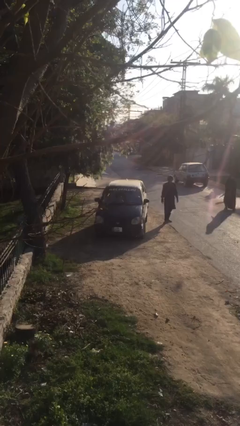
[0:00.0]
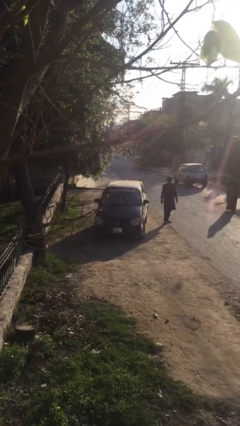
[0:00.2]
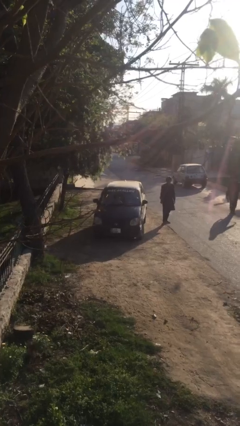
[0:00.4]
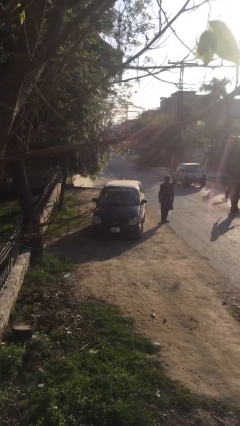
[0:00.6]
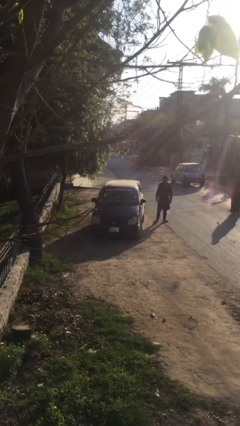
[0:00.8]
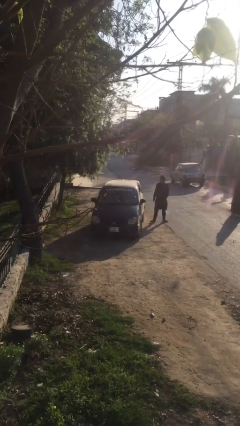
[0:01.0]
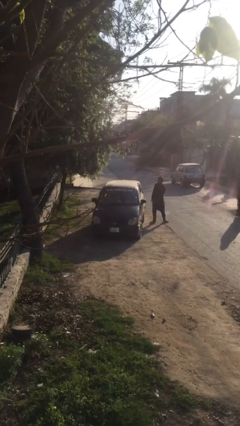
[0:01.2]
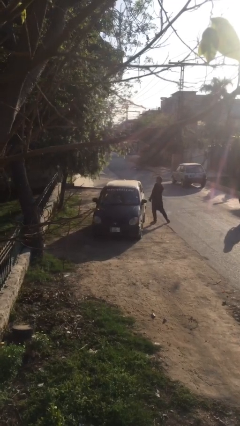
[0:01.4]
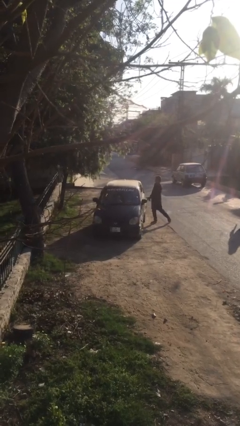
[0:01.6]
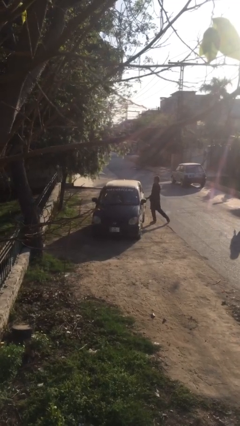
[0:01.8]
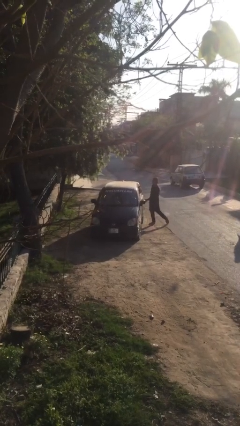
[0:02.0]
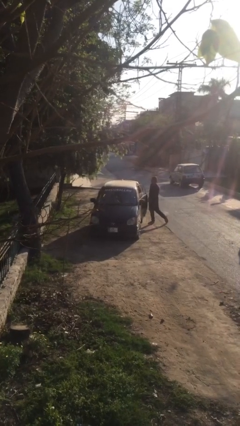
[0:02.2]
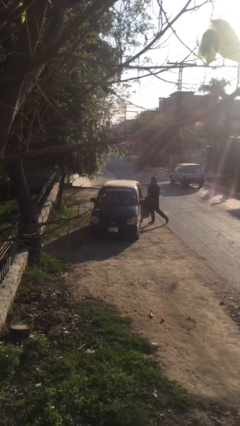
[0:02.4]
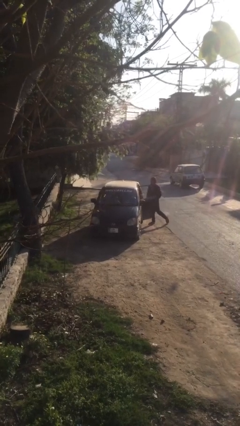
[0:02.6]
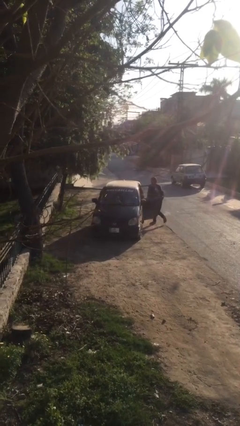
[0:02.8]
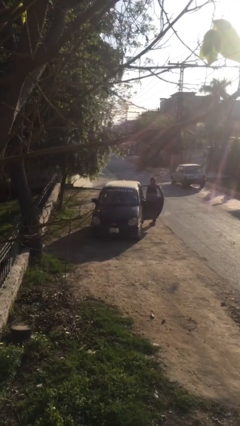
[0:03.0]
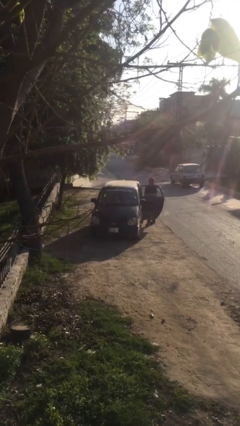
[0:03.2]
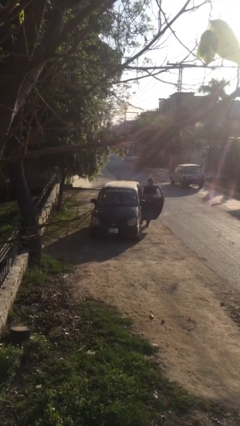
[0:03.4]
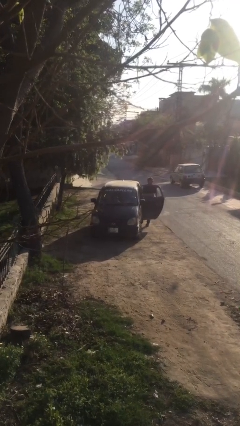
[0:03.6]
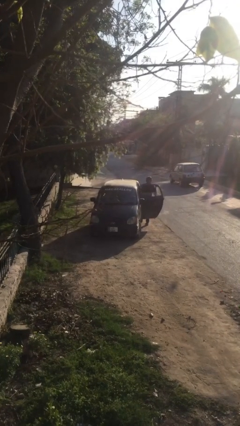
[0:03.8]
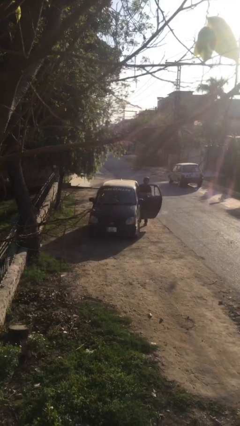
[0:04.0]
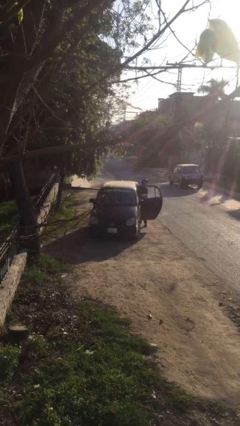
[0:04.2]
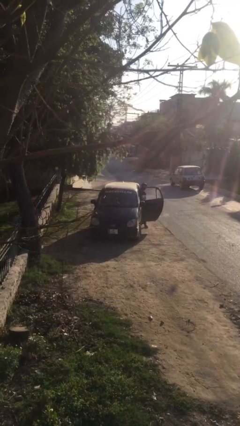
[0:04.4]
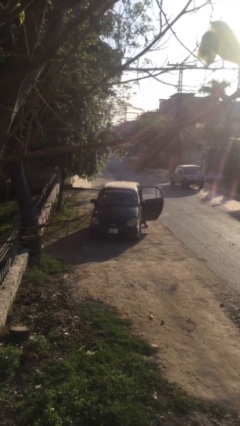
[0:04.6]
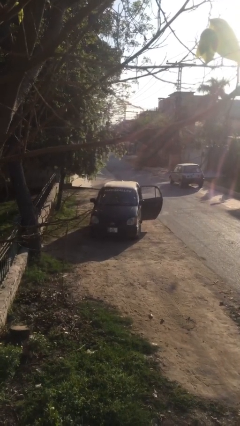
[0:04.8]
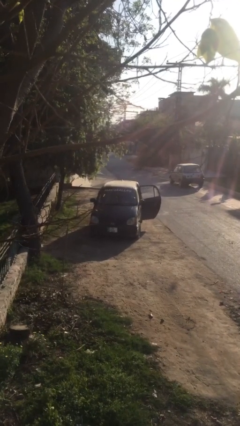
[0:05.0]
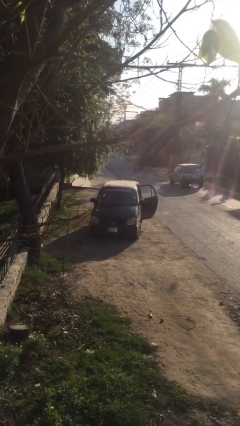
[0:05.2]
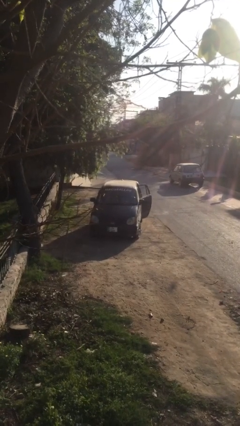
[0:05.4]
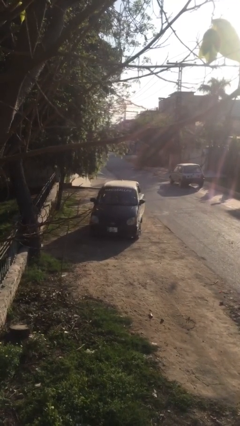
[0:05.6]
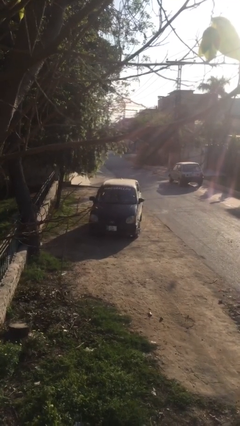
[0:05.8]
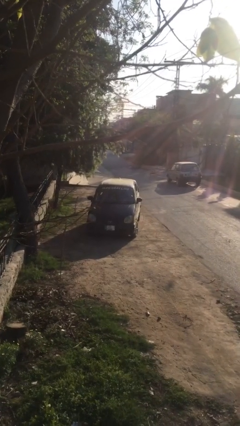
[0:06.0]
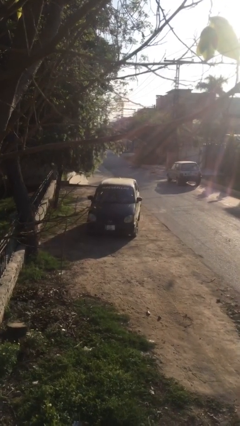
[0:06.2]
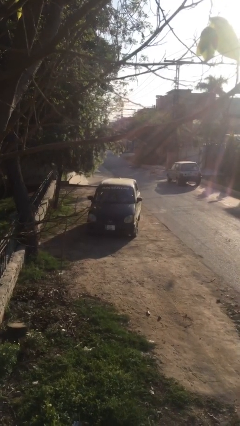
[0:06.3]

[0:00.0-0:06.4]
car picks up person

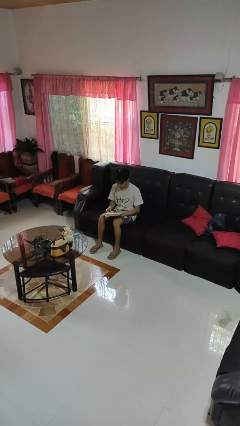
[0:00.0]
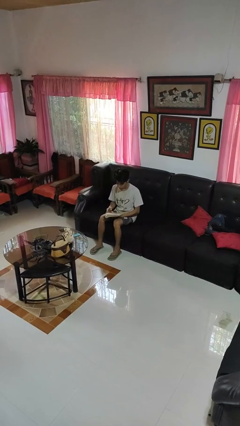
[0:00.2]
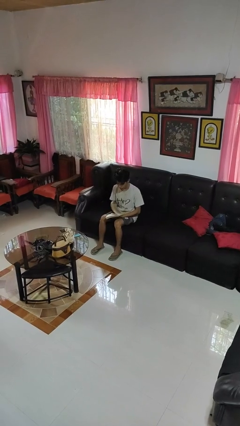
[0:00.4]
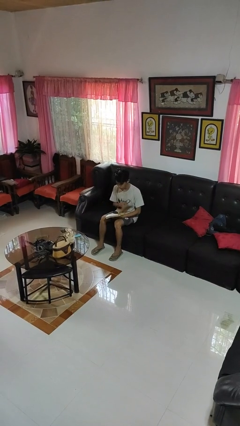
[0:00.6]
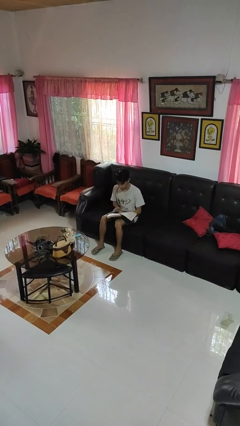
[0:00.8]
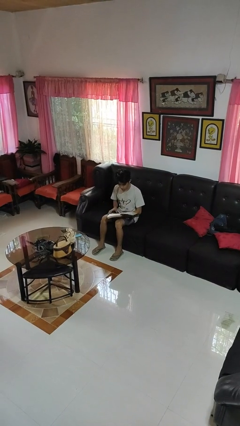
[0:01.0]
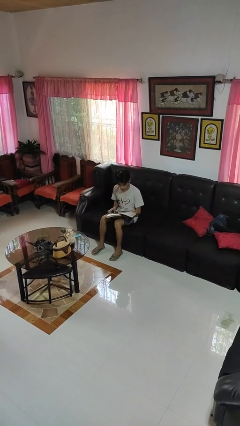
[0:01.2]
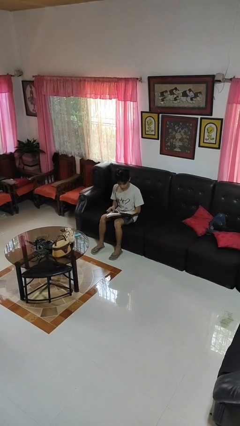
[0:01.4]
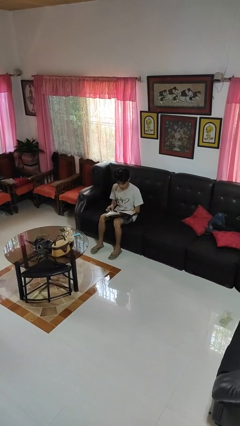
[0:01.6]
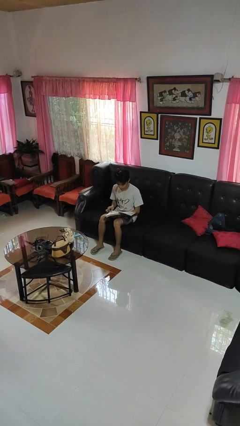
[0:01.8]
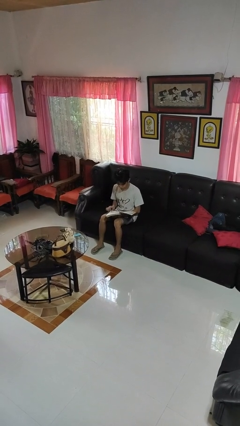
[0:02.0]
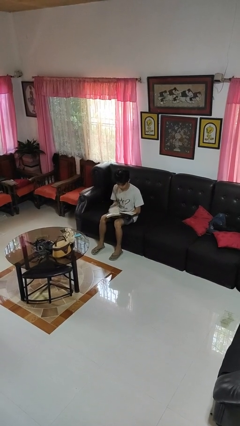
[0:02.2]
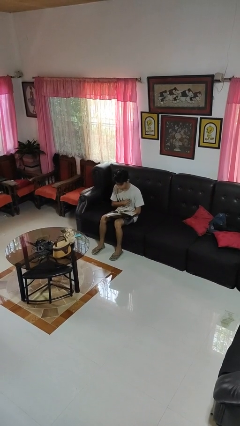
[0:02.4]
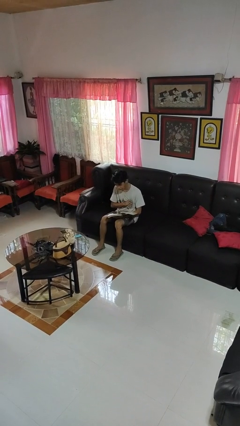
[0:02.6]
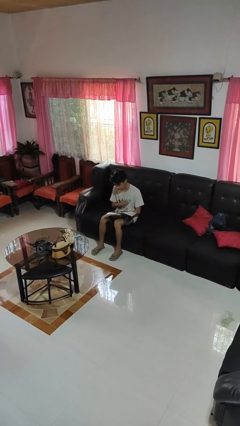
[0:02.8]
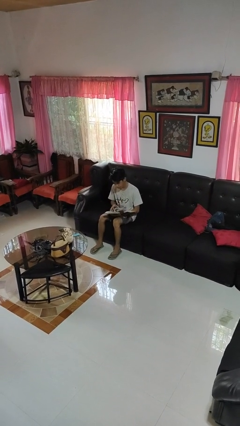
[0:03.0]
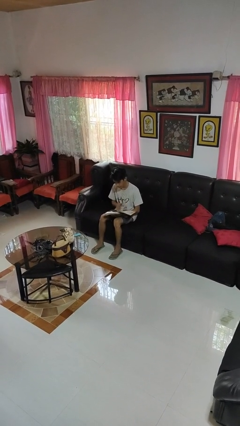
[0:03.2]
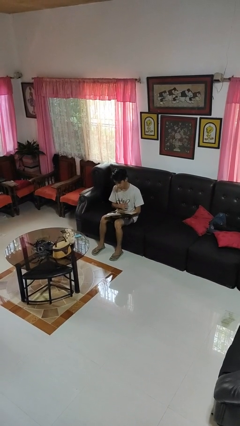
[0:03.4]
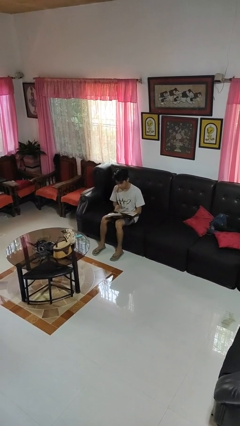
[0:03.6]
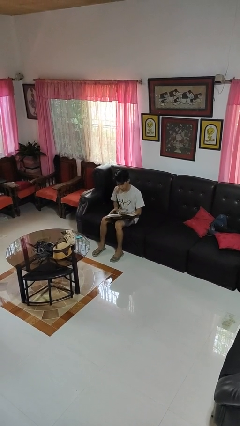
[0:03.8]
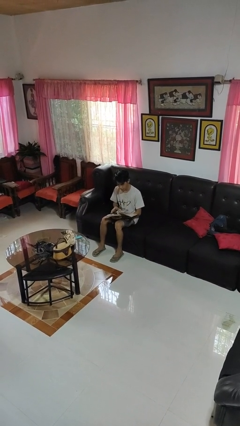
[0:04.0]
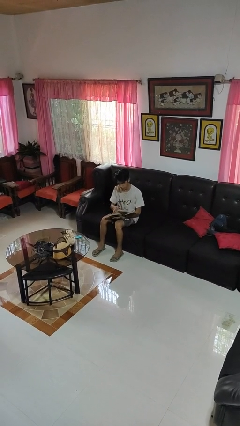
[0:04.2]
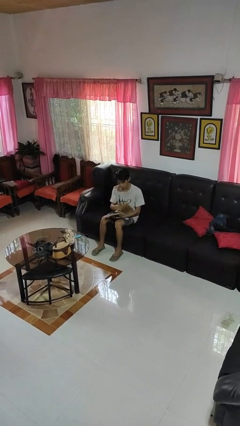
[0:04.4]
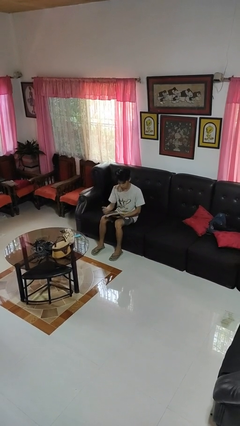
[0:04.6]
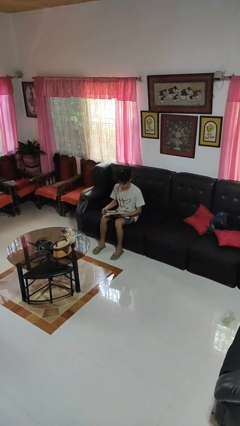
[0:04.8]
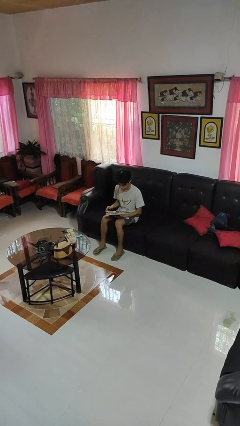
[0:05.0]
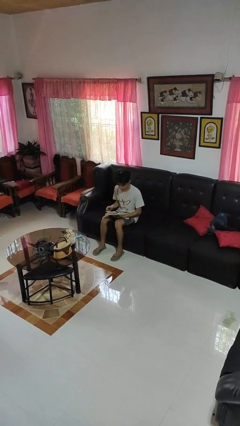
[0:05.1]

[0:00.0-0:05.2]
person reads book

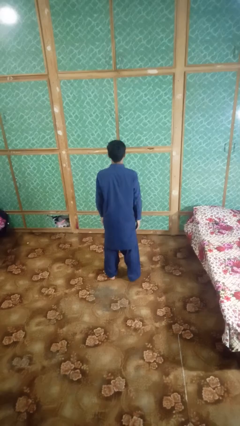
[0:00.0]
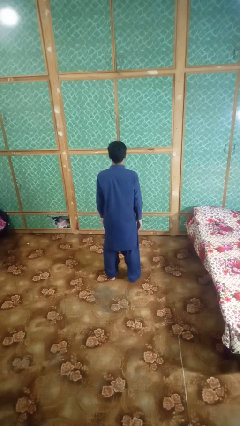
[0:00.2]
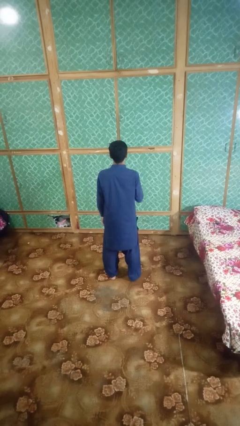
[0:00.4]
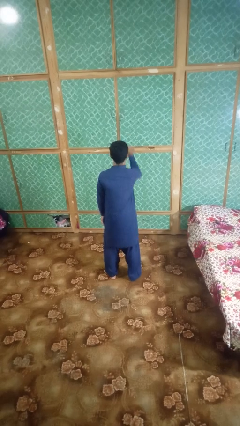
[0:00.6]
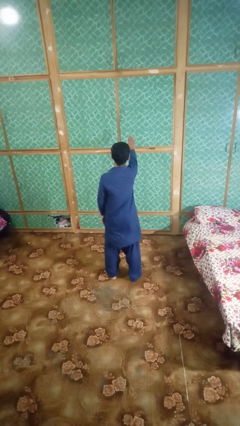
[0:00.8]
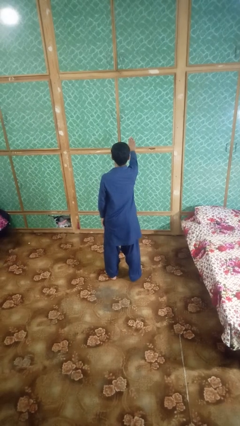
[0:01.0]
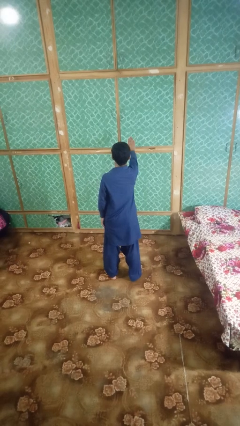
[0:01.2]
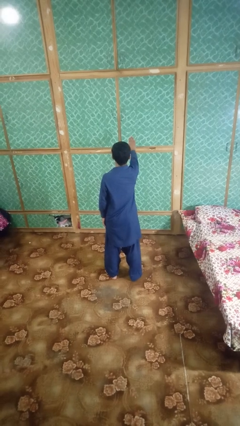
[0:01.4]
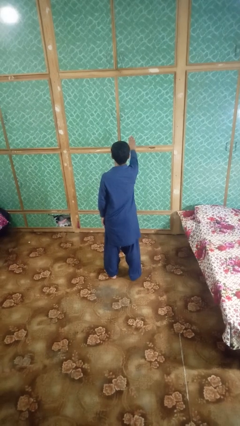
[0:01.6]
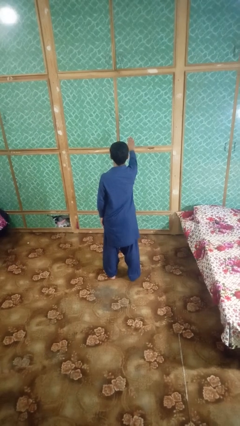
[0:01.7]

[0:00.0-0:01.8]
person gestures stop

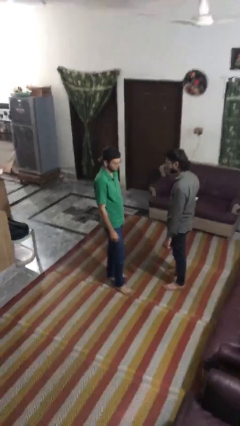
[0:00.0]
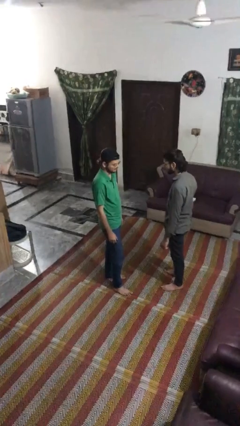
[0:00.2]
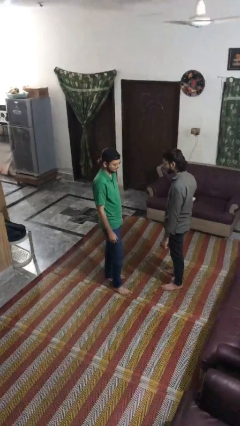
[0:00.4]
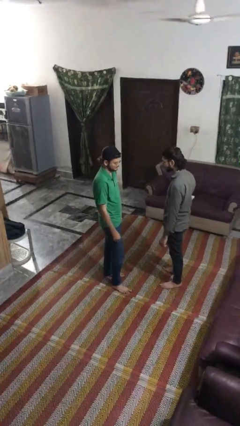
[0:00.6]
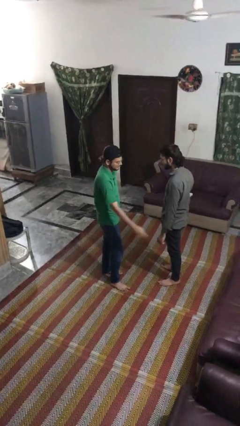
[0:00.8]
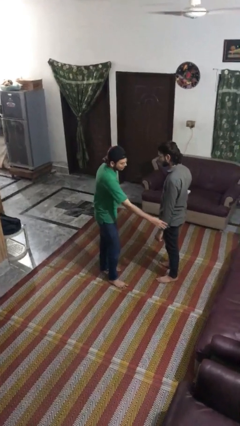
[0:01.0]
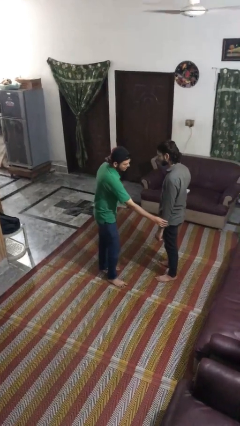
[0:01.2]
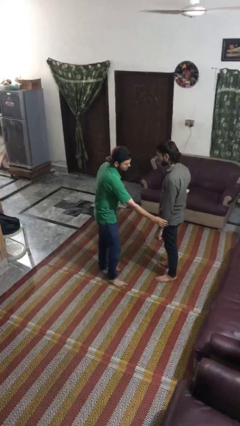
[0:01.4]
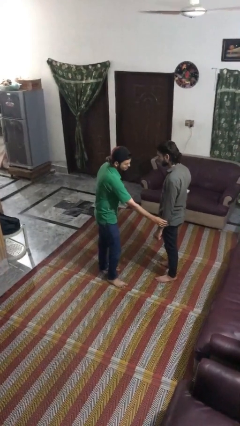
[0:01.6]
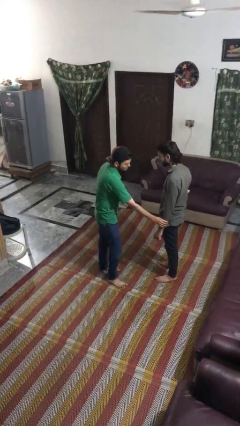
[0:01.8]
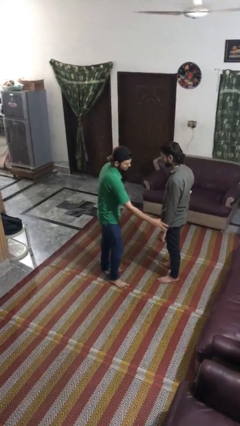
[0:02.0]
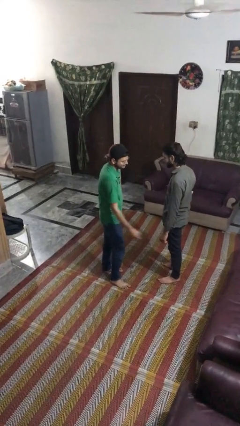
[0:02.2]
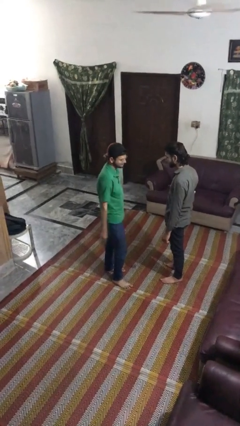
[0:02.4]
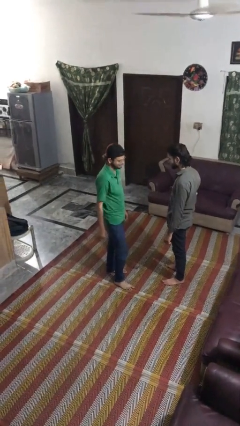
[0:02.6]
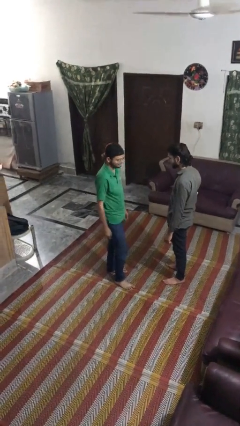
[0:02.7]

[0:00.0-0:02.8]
person grabs person by forearm

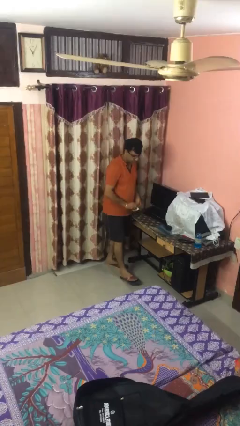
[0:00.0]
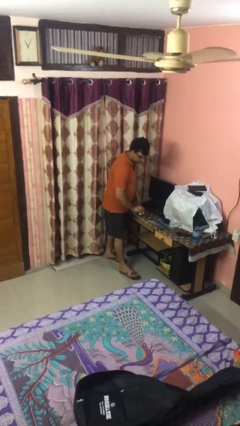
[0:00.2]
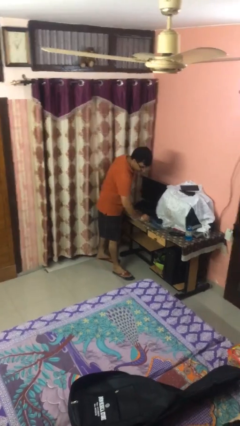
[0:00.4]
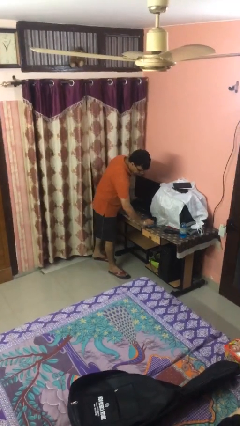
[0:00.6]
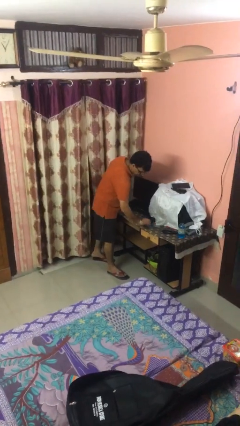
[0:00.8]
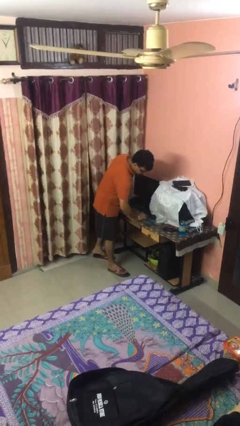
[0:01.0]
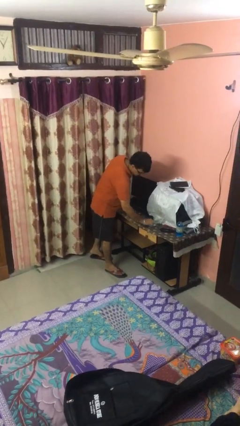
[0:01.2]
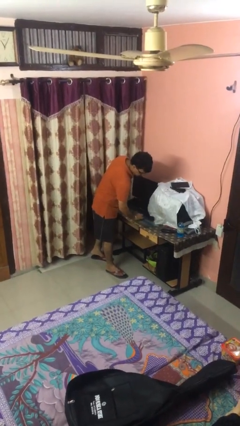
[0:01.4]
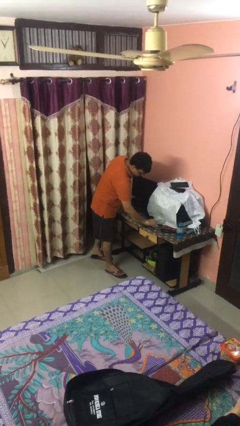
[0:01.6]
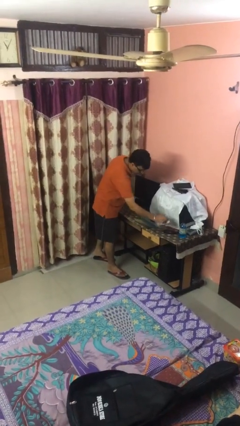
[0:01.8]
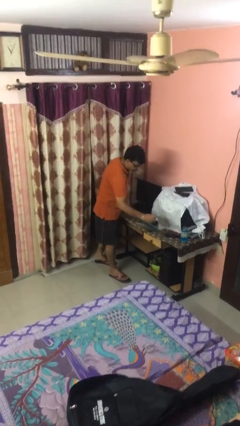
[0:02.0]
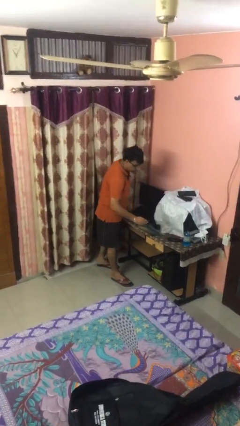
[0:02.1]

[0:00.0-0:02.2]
person cleans table with rag
